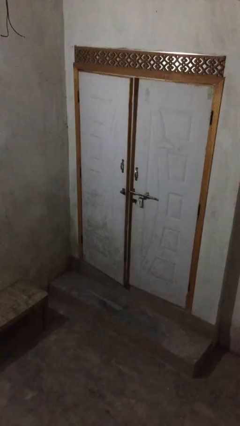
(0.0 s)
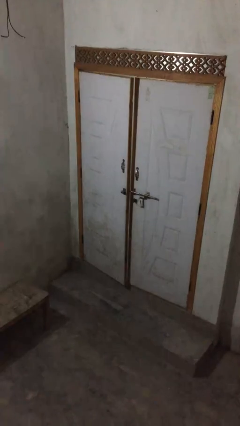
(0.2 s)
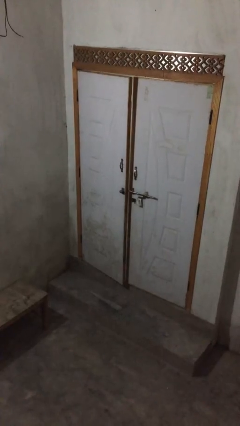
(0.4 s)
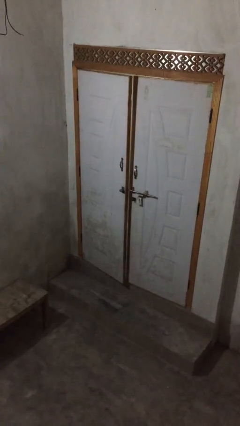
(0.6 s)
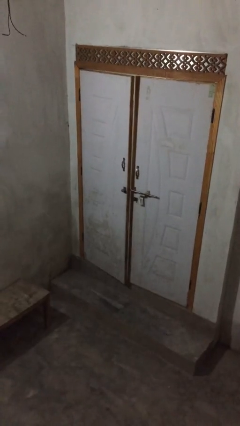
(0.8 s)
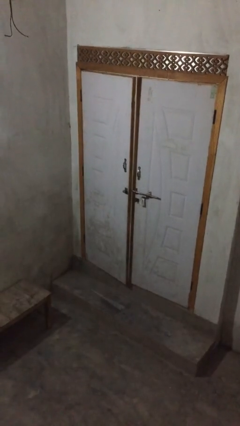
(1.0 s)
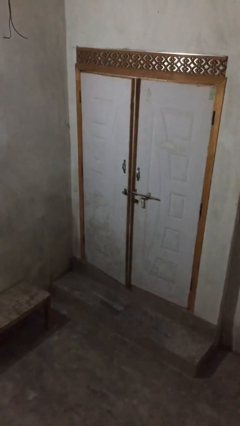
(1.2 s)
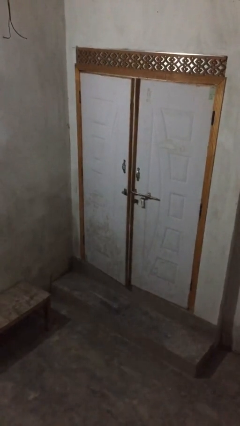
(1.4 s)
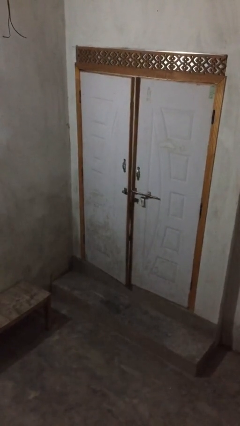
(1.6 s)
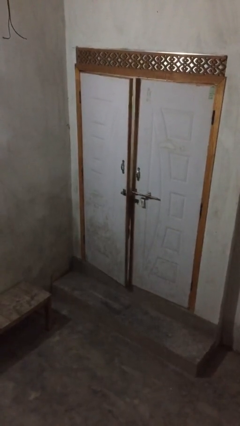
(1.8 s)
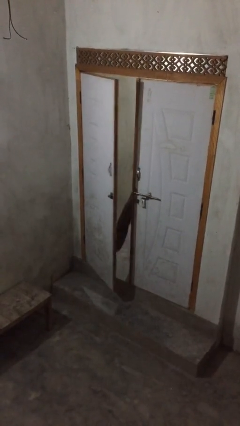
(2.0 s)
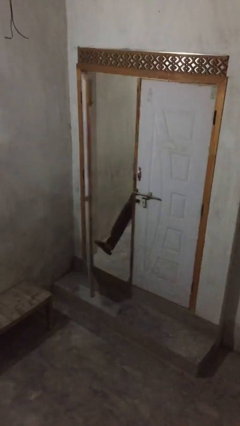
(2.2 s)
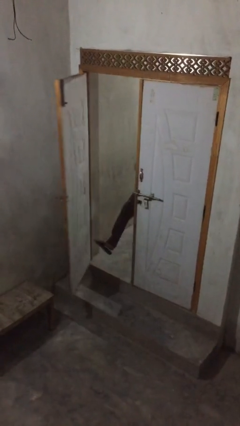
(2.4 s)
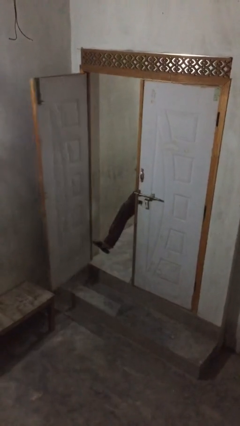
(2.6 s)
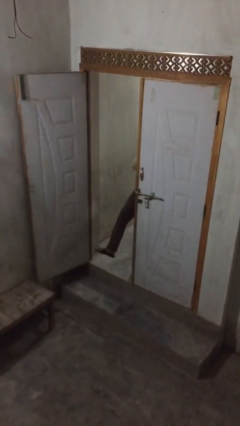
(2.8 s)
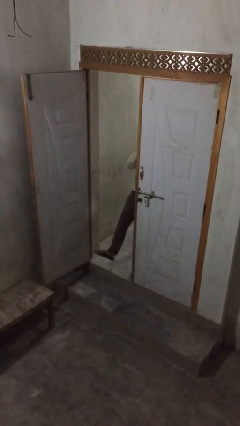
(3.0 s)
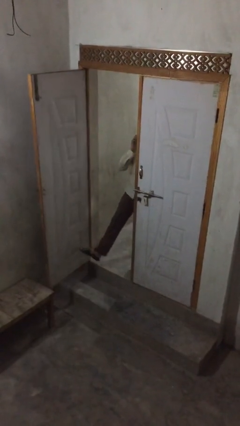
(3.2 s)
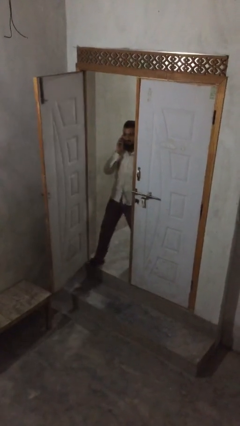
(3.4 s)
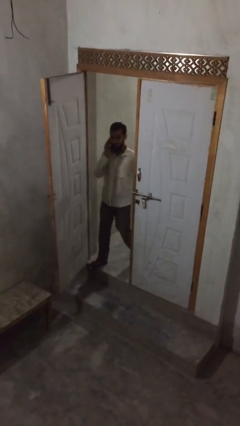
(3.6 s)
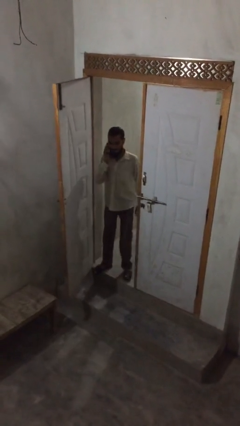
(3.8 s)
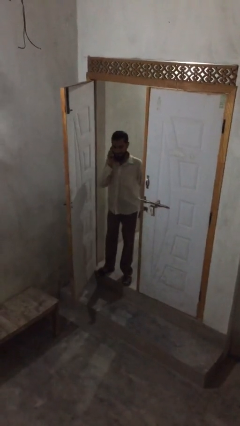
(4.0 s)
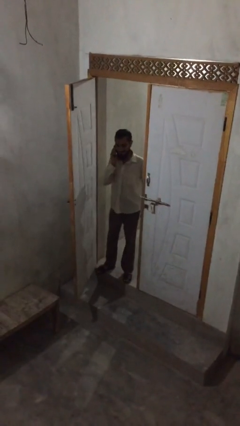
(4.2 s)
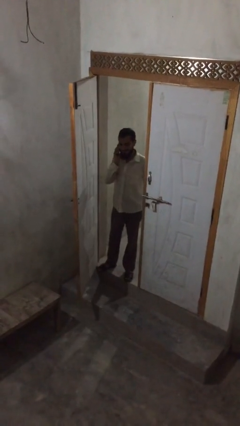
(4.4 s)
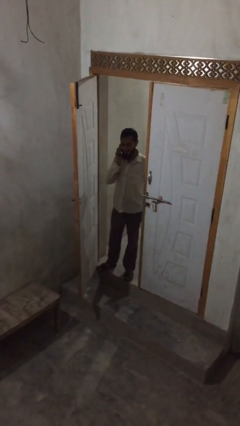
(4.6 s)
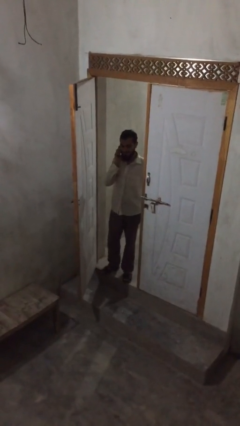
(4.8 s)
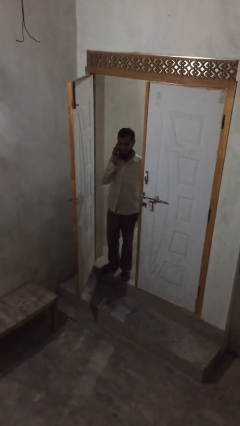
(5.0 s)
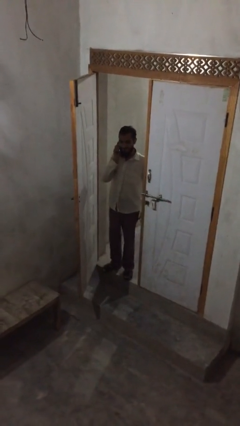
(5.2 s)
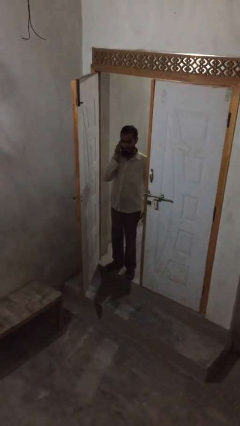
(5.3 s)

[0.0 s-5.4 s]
person opens facility door

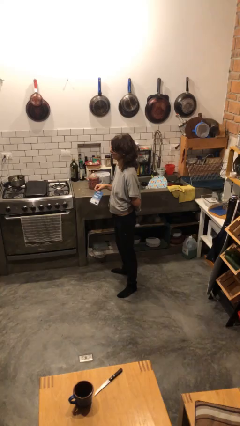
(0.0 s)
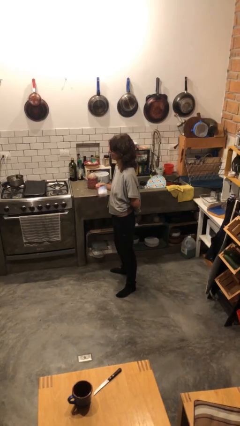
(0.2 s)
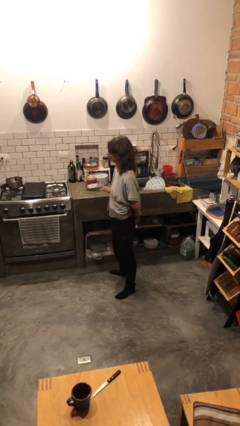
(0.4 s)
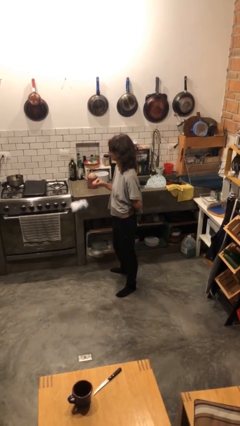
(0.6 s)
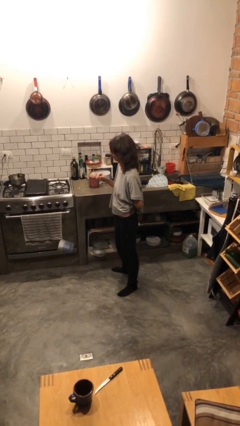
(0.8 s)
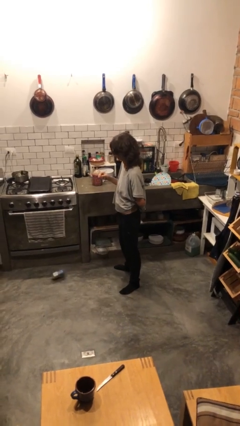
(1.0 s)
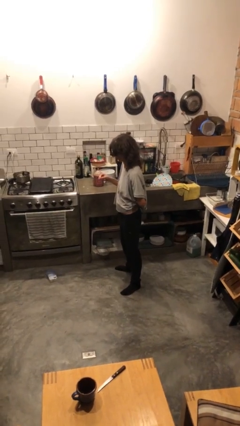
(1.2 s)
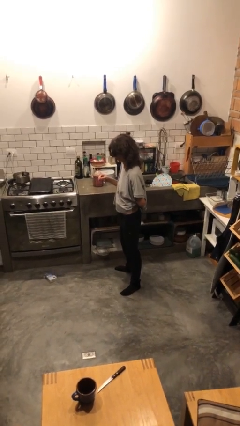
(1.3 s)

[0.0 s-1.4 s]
person drops object

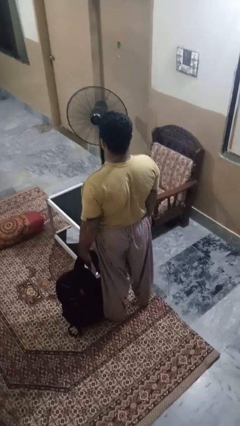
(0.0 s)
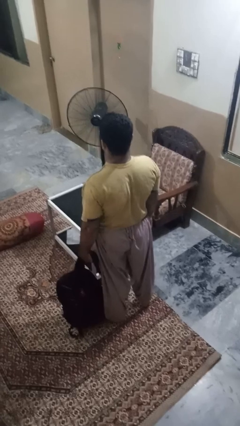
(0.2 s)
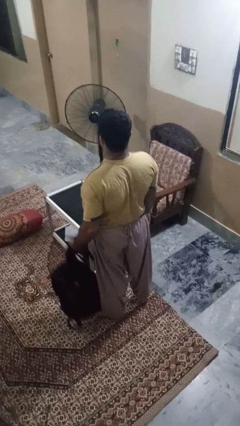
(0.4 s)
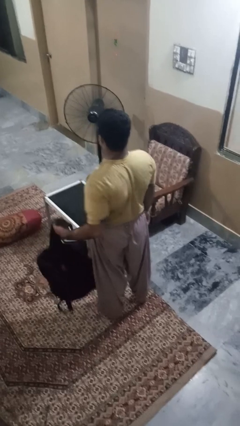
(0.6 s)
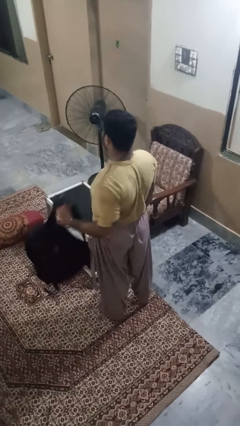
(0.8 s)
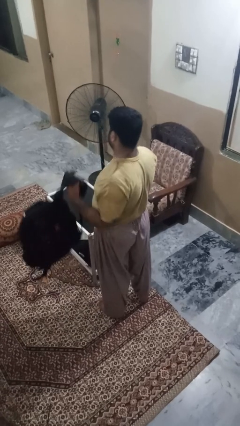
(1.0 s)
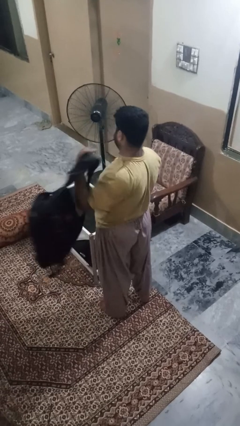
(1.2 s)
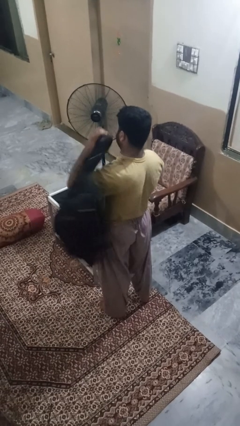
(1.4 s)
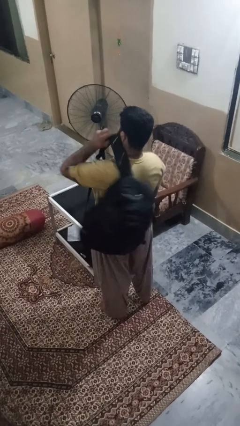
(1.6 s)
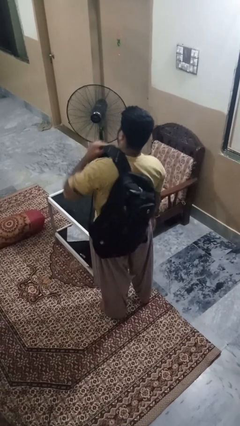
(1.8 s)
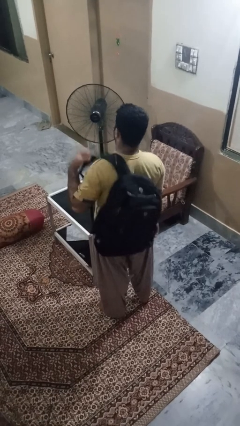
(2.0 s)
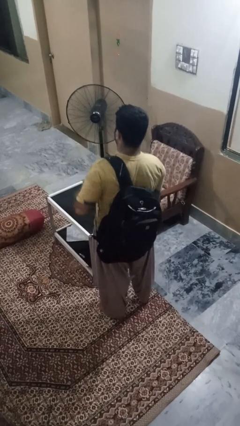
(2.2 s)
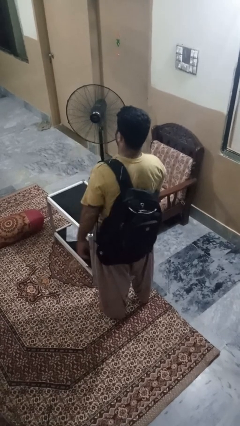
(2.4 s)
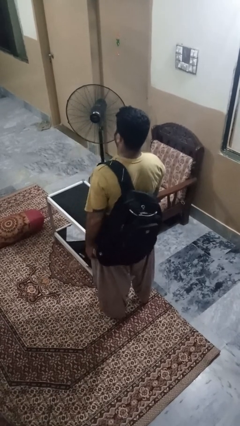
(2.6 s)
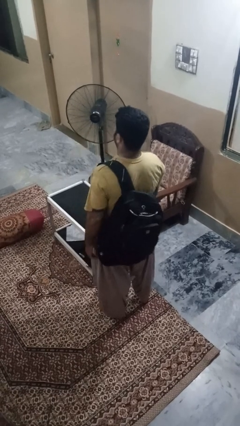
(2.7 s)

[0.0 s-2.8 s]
person puts on backpack

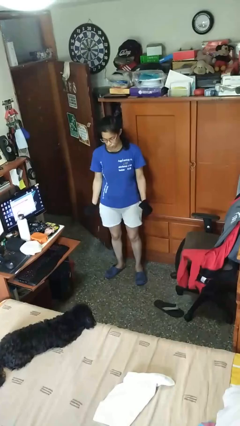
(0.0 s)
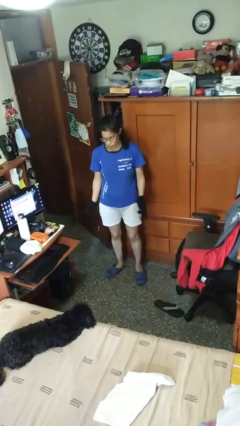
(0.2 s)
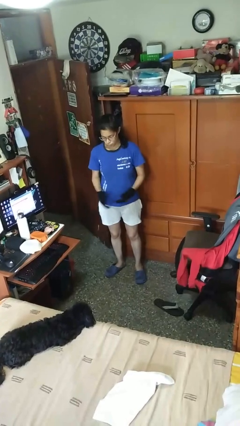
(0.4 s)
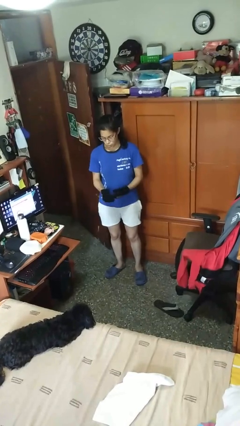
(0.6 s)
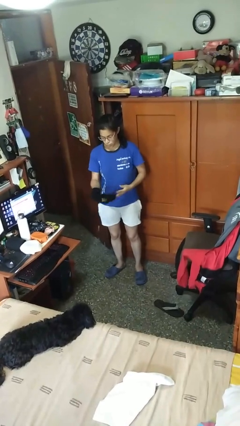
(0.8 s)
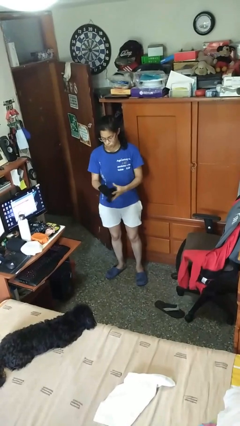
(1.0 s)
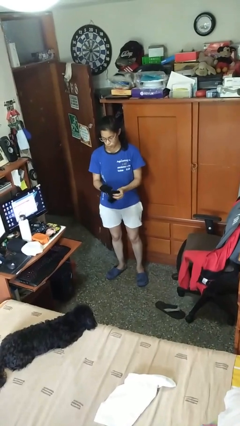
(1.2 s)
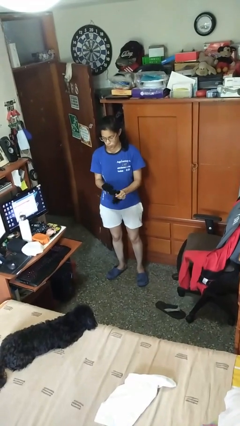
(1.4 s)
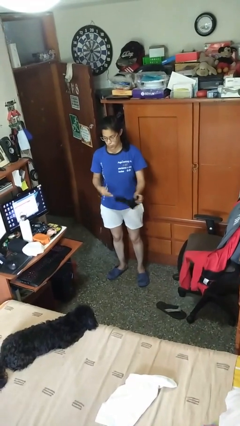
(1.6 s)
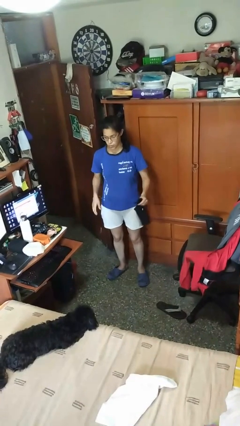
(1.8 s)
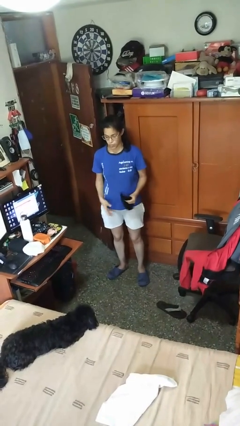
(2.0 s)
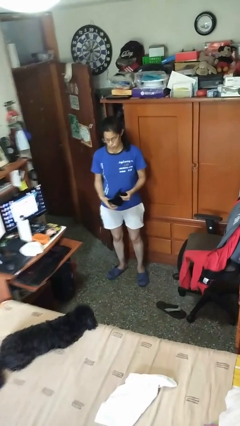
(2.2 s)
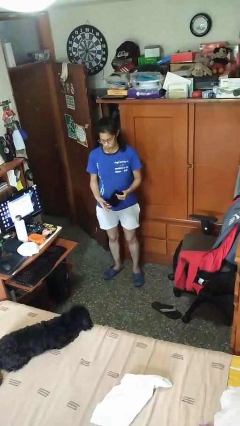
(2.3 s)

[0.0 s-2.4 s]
person takes off gloves

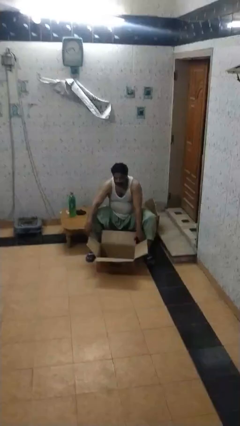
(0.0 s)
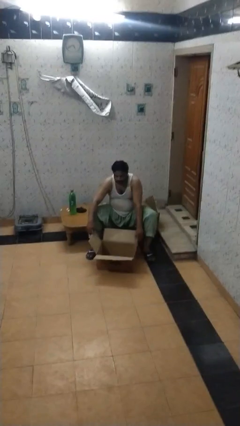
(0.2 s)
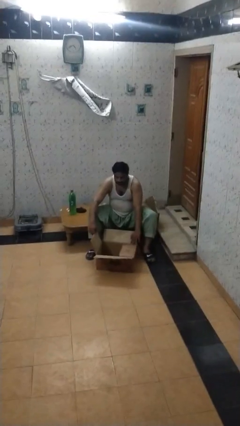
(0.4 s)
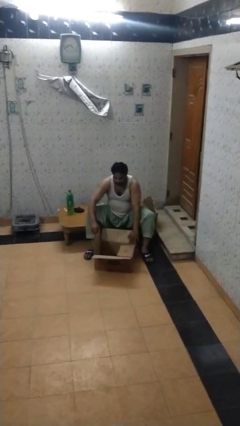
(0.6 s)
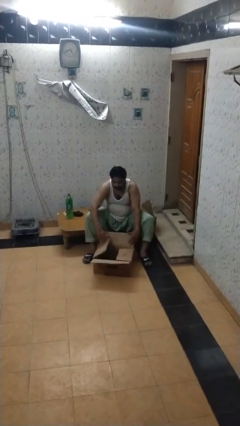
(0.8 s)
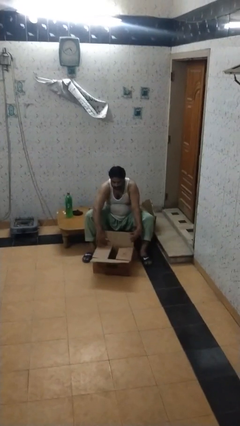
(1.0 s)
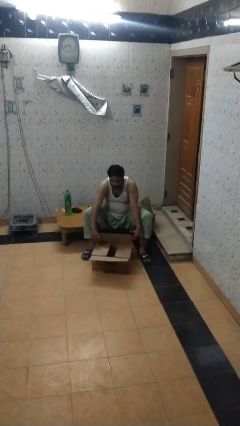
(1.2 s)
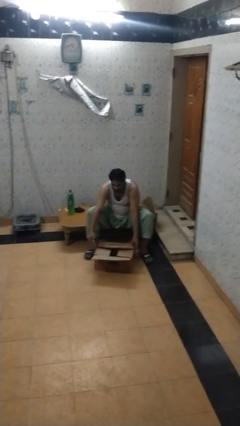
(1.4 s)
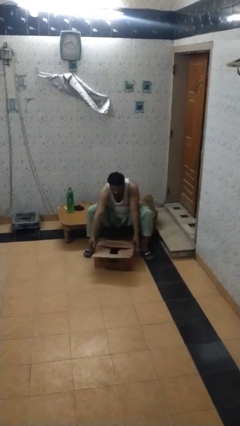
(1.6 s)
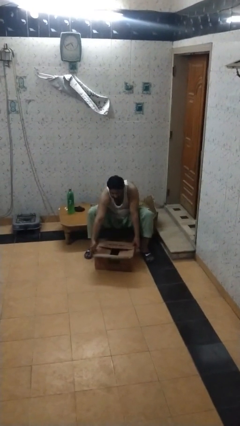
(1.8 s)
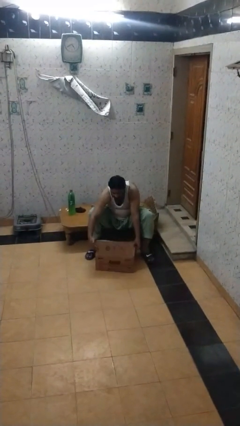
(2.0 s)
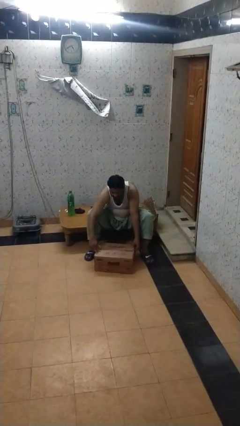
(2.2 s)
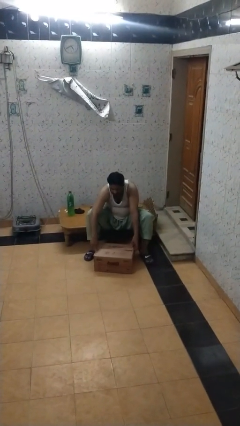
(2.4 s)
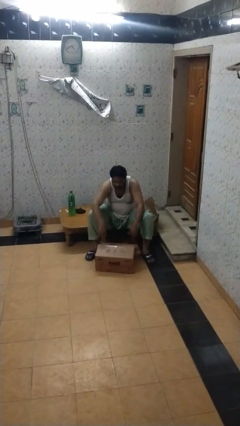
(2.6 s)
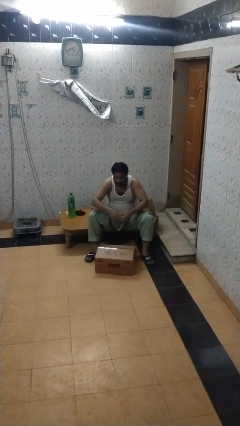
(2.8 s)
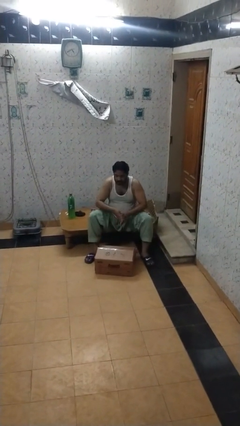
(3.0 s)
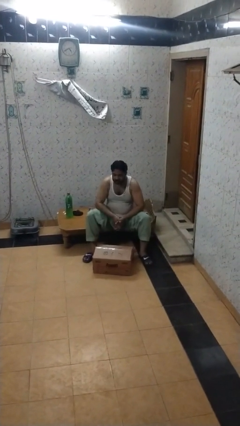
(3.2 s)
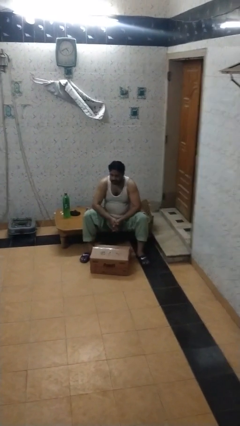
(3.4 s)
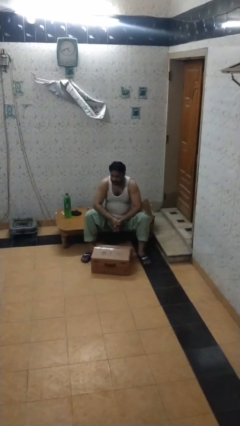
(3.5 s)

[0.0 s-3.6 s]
person closes box

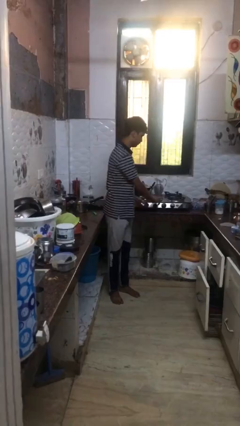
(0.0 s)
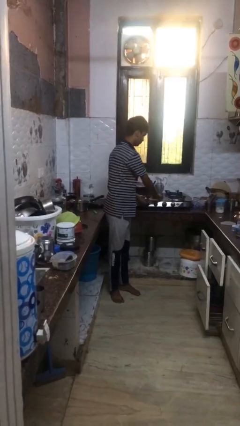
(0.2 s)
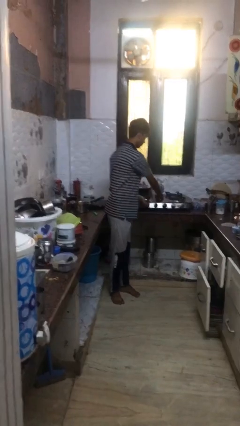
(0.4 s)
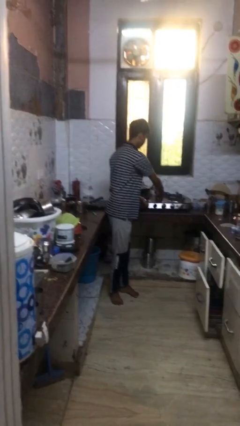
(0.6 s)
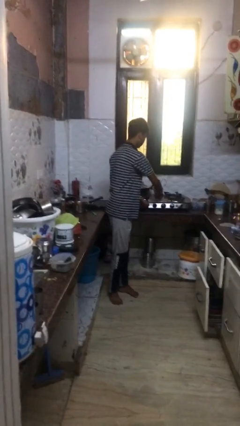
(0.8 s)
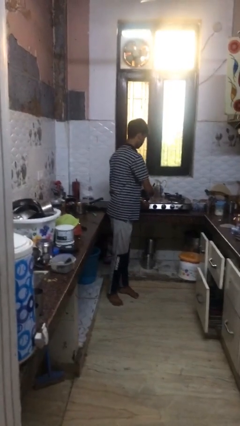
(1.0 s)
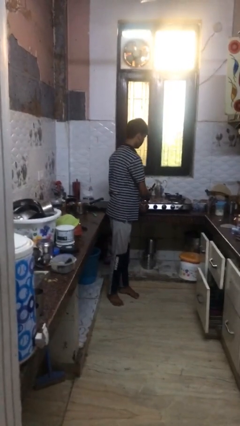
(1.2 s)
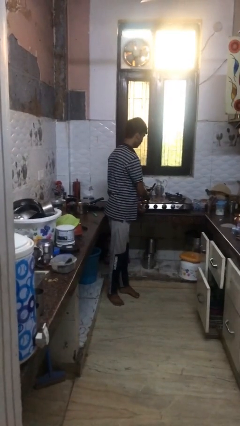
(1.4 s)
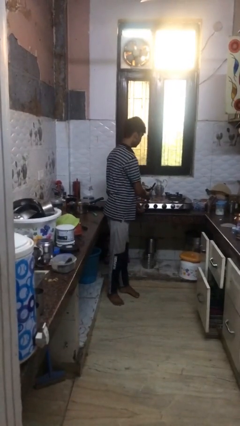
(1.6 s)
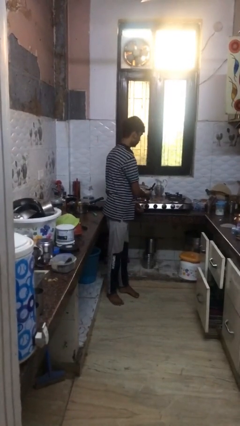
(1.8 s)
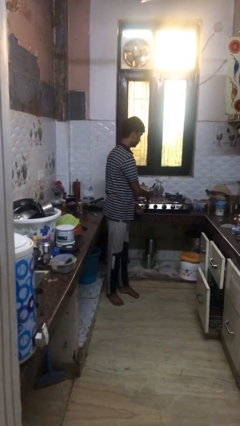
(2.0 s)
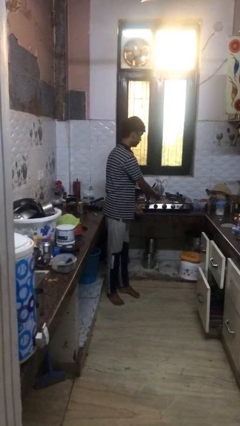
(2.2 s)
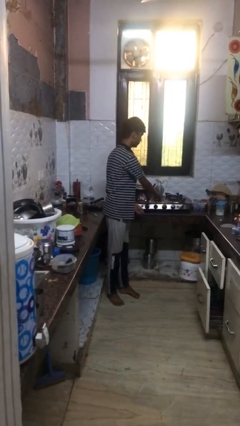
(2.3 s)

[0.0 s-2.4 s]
person turns on stovetop
